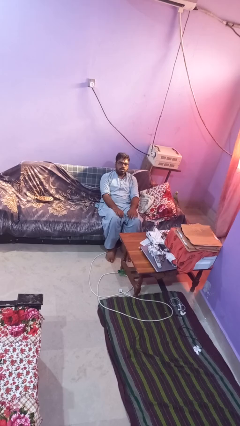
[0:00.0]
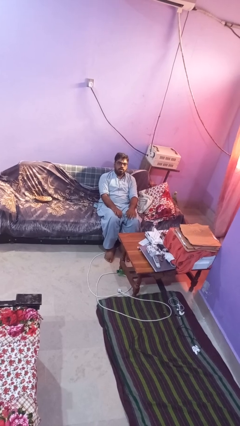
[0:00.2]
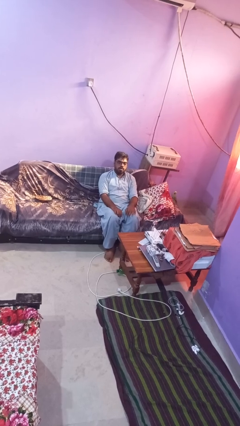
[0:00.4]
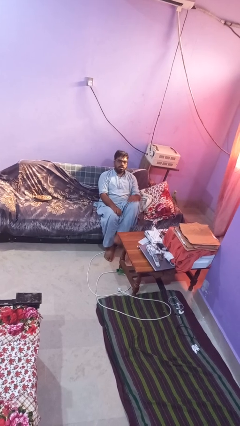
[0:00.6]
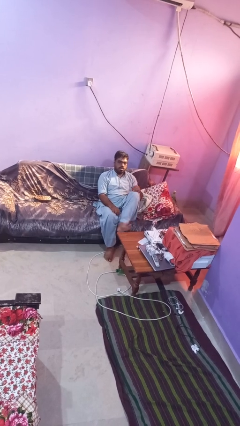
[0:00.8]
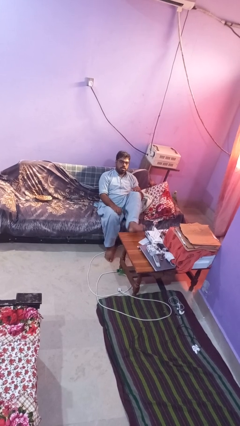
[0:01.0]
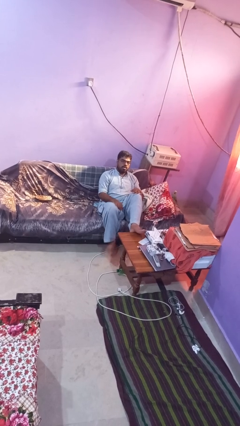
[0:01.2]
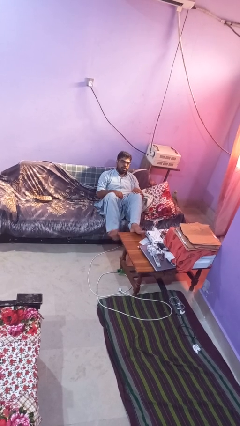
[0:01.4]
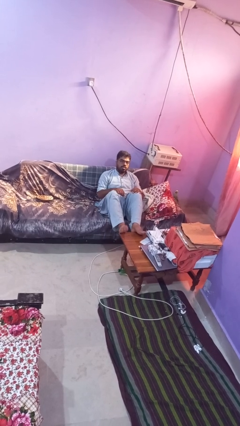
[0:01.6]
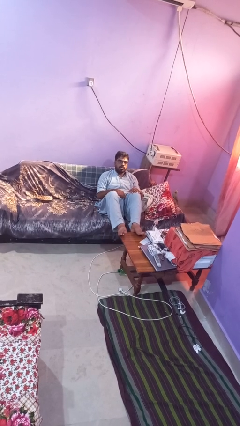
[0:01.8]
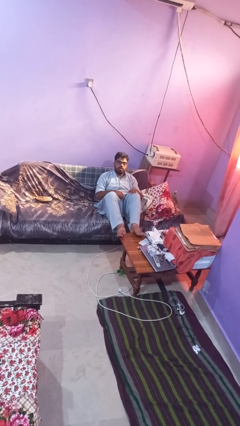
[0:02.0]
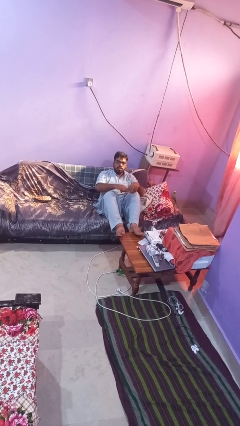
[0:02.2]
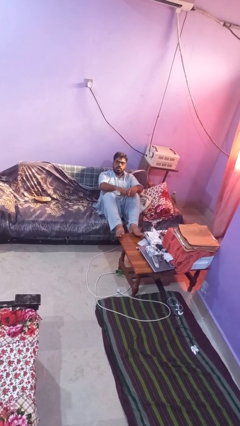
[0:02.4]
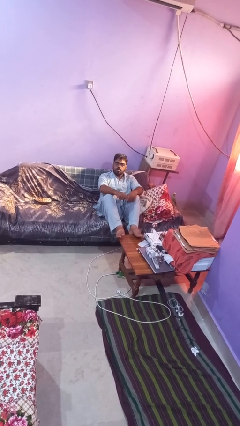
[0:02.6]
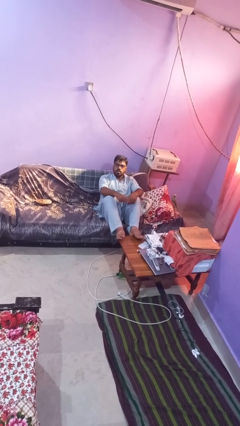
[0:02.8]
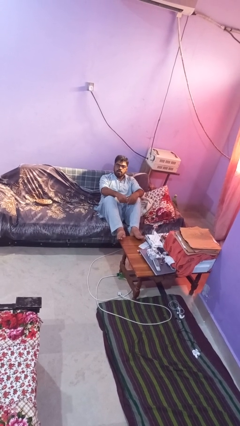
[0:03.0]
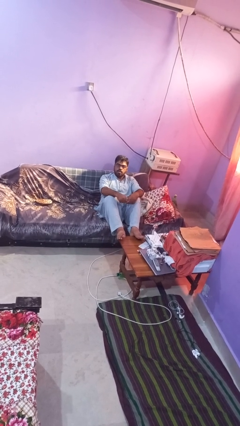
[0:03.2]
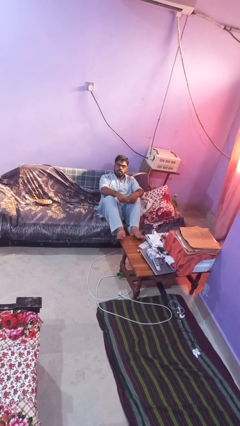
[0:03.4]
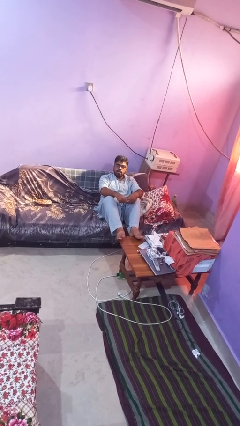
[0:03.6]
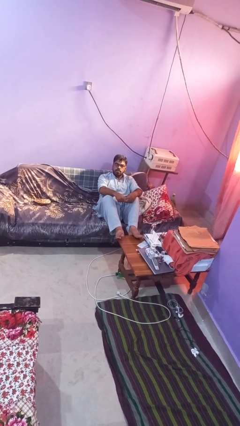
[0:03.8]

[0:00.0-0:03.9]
person puts feet up

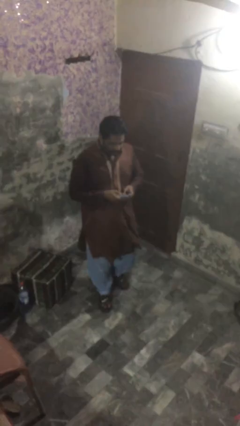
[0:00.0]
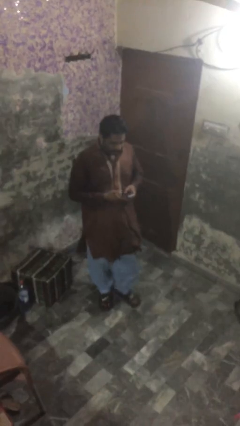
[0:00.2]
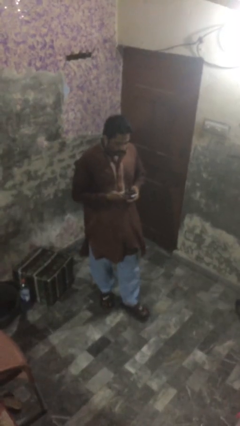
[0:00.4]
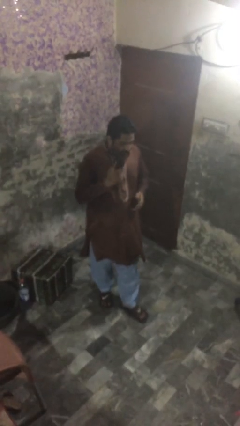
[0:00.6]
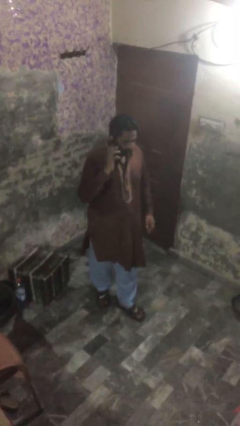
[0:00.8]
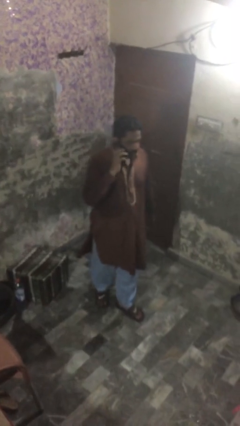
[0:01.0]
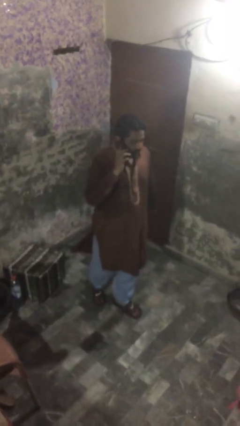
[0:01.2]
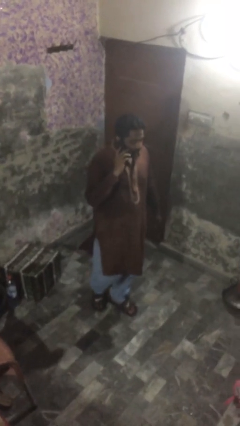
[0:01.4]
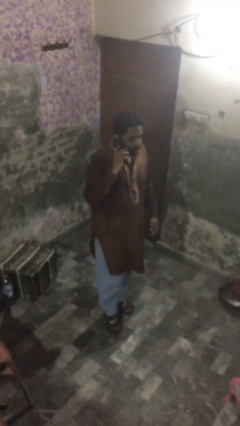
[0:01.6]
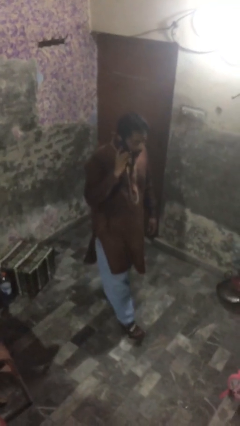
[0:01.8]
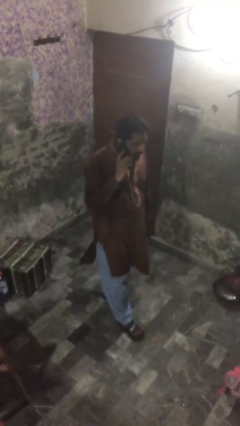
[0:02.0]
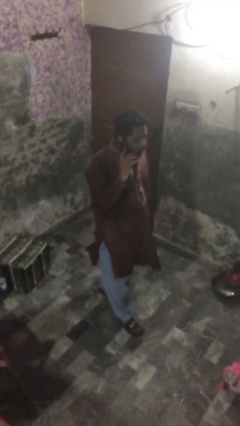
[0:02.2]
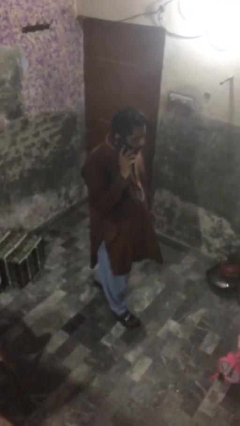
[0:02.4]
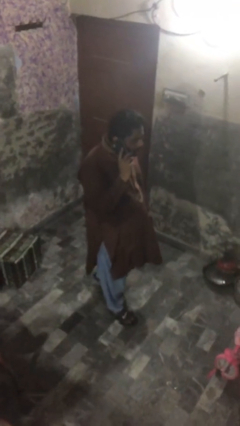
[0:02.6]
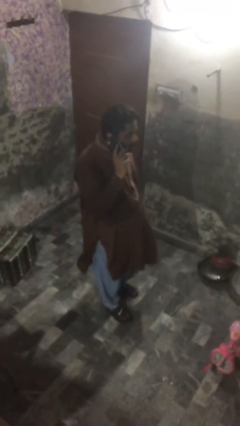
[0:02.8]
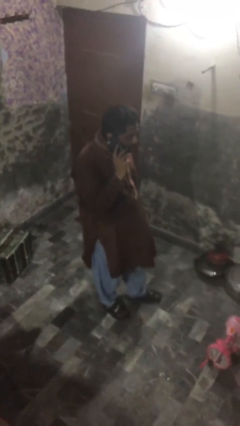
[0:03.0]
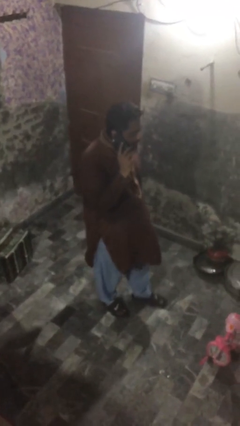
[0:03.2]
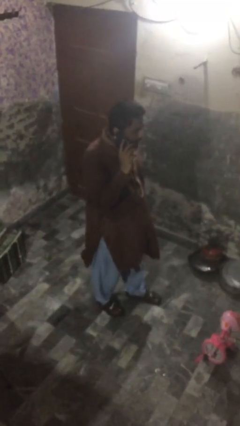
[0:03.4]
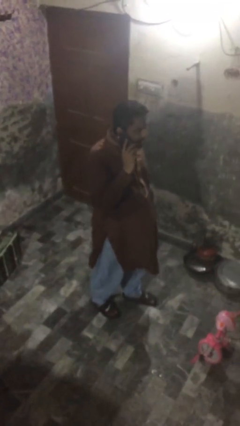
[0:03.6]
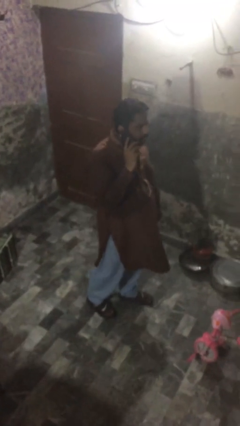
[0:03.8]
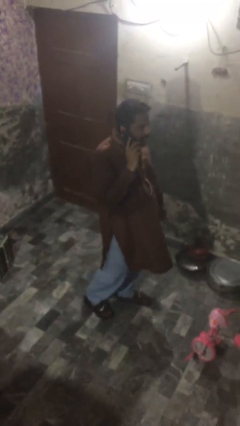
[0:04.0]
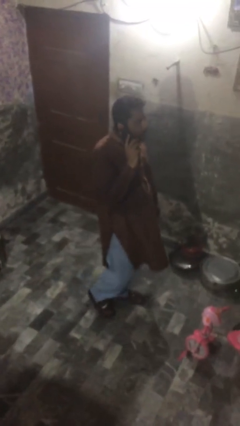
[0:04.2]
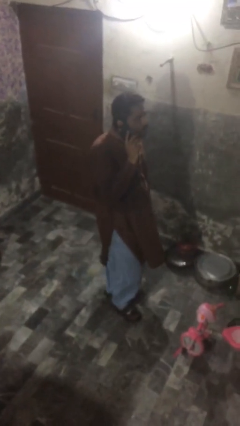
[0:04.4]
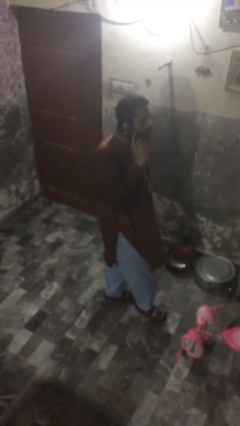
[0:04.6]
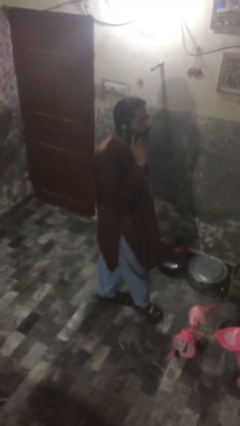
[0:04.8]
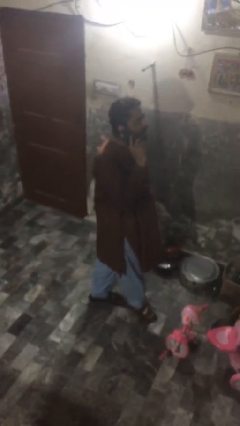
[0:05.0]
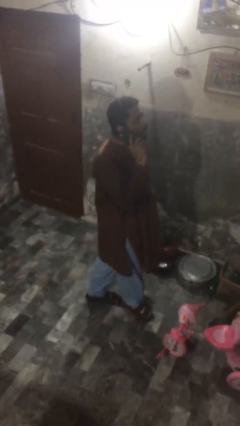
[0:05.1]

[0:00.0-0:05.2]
person talks on phone

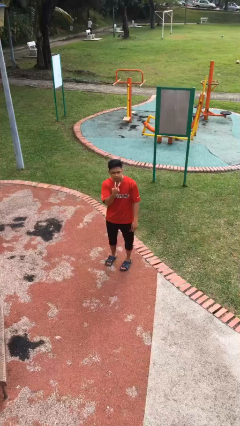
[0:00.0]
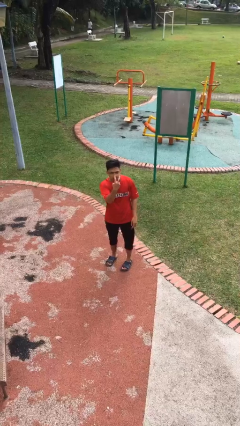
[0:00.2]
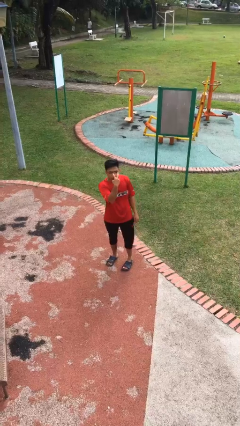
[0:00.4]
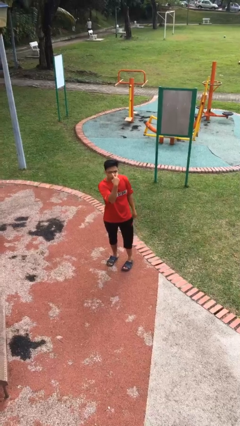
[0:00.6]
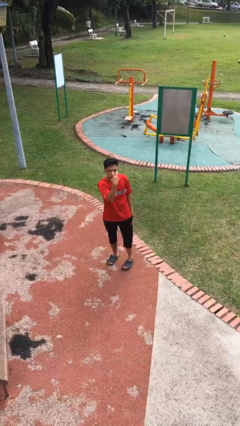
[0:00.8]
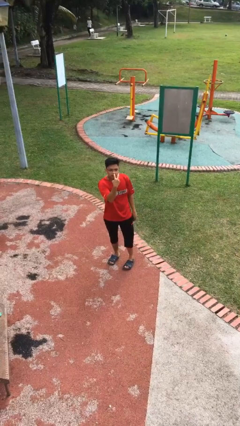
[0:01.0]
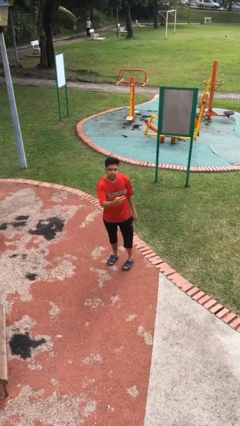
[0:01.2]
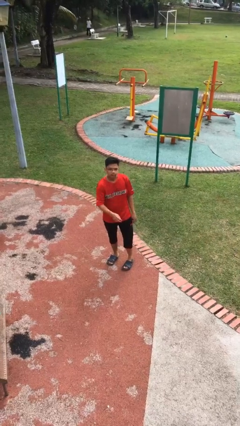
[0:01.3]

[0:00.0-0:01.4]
person gestures watch closely

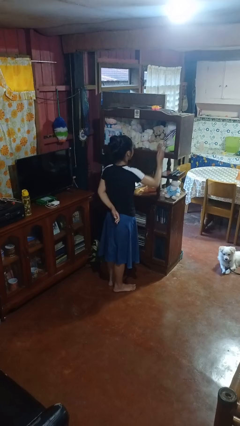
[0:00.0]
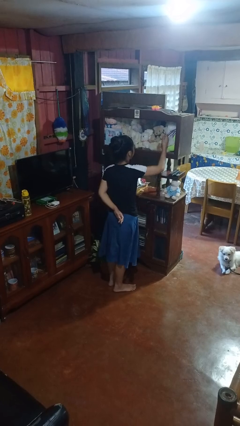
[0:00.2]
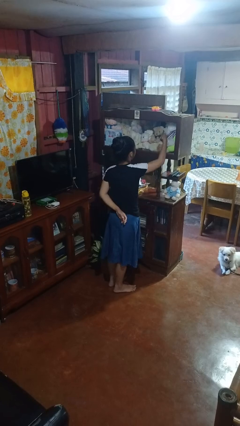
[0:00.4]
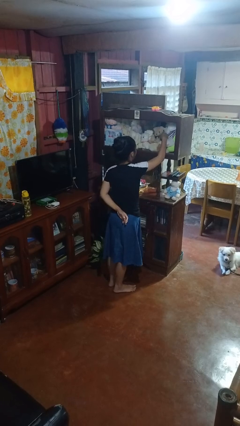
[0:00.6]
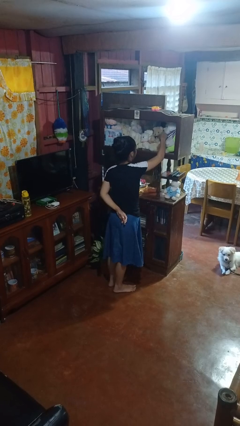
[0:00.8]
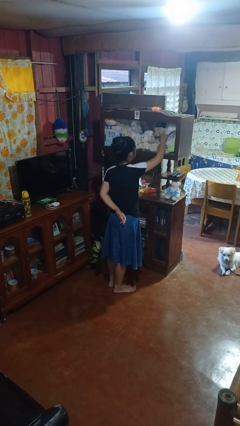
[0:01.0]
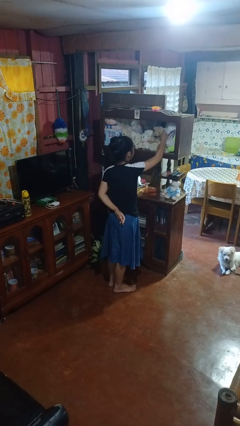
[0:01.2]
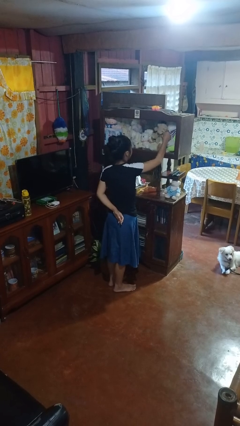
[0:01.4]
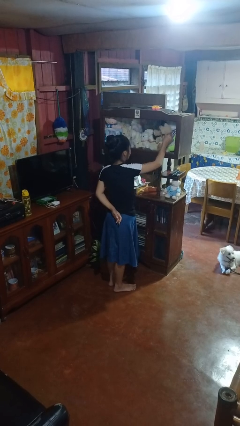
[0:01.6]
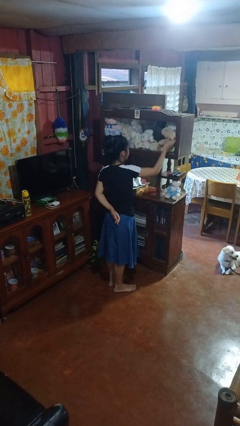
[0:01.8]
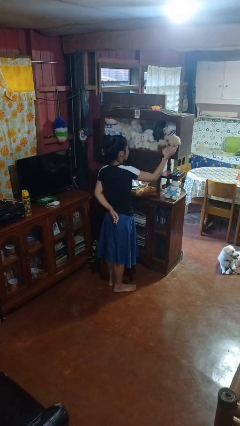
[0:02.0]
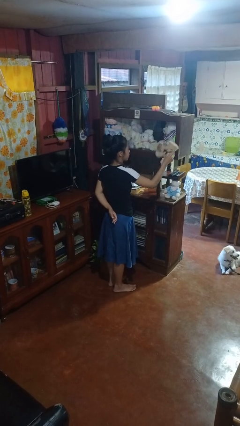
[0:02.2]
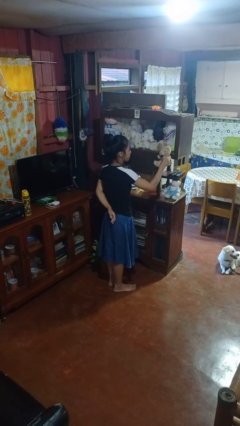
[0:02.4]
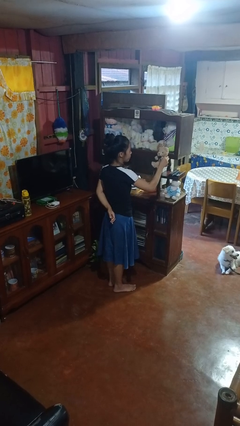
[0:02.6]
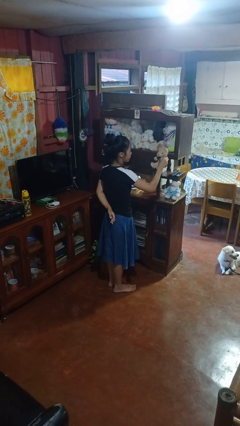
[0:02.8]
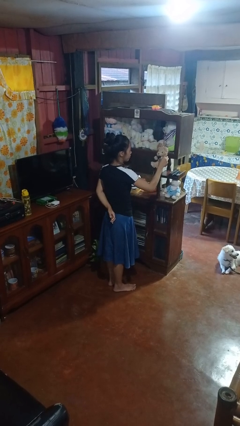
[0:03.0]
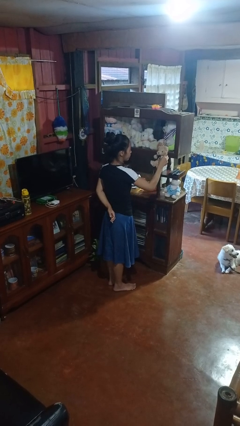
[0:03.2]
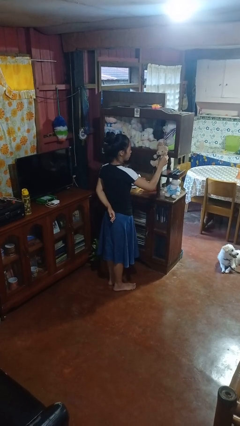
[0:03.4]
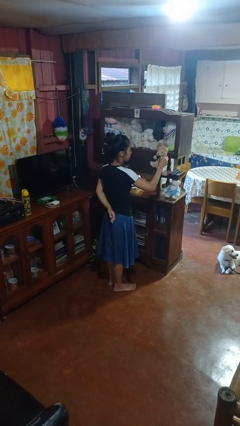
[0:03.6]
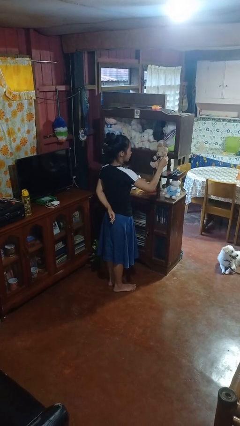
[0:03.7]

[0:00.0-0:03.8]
person picks up object from shelf

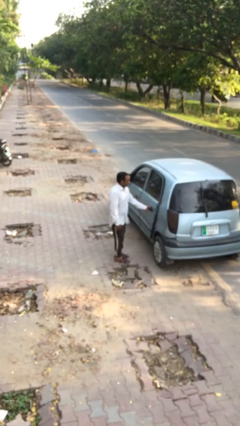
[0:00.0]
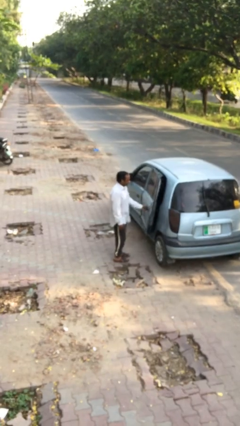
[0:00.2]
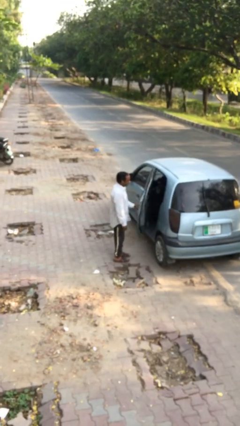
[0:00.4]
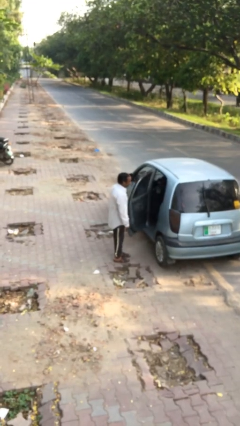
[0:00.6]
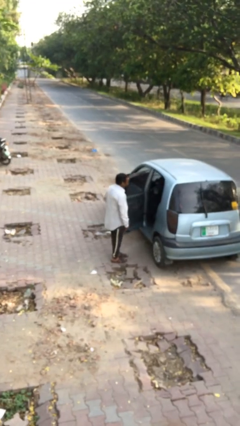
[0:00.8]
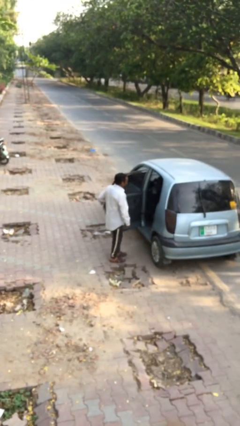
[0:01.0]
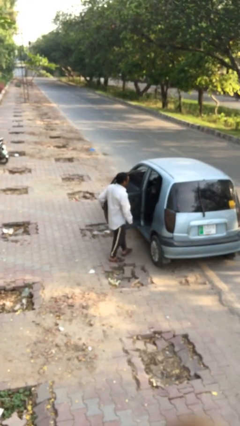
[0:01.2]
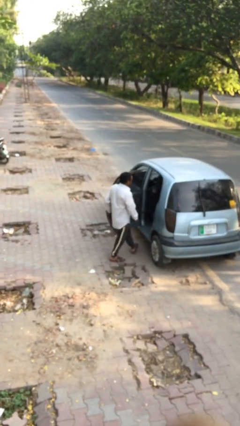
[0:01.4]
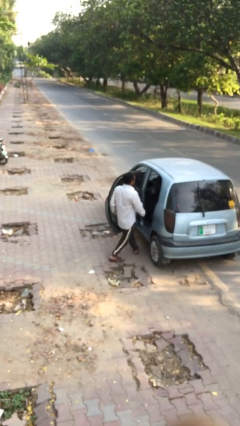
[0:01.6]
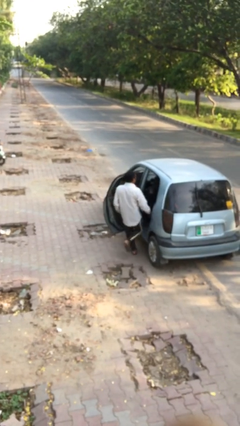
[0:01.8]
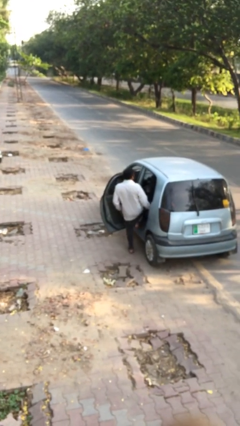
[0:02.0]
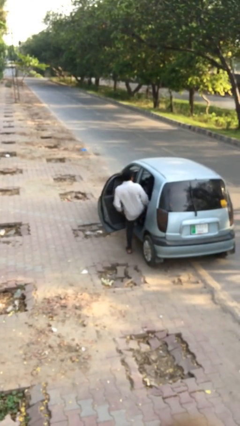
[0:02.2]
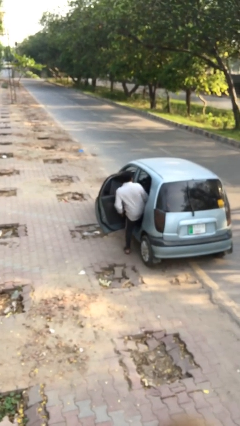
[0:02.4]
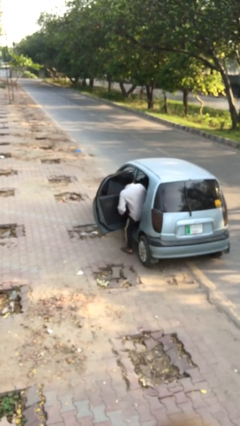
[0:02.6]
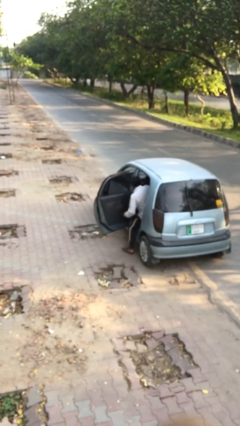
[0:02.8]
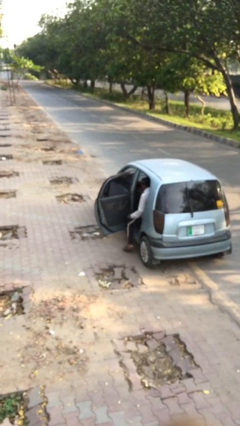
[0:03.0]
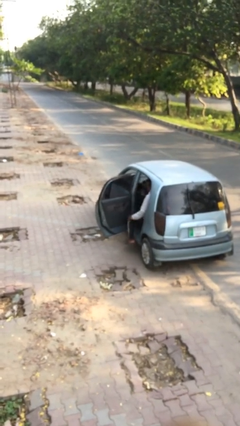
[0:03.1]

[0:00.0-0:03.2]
person enters car
